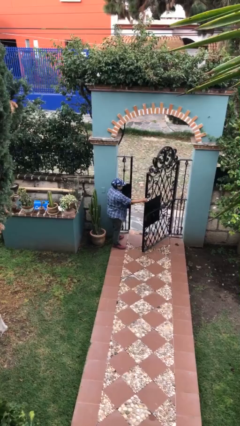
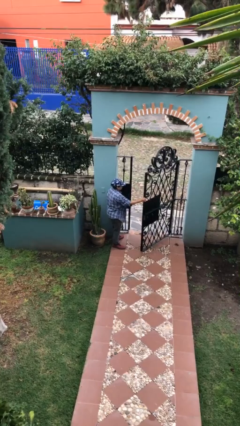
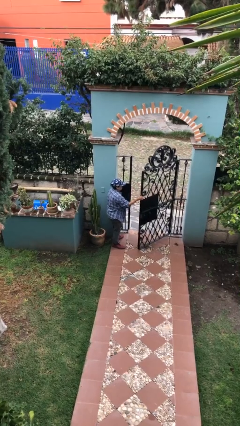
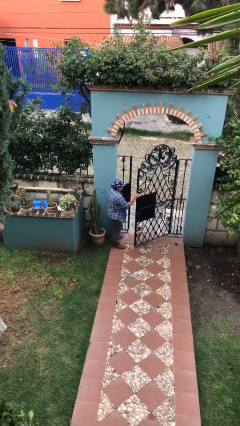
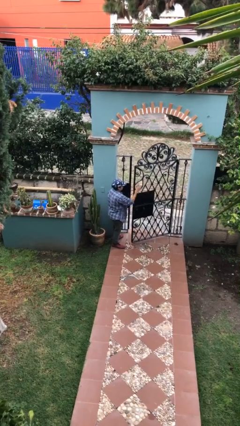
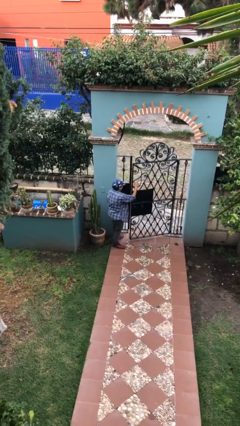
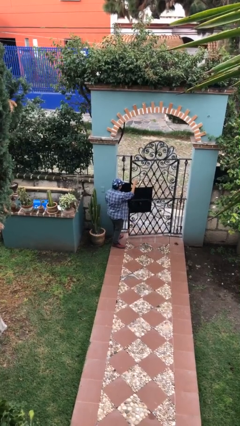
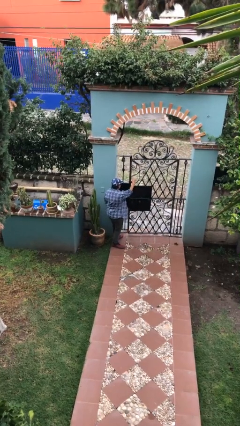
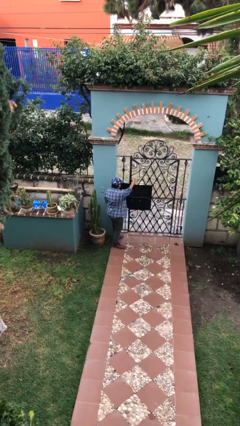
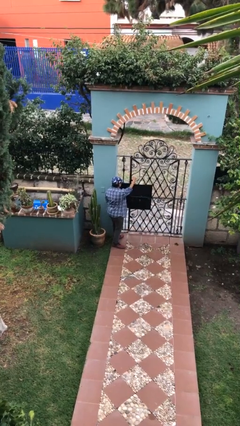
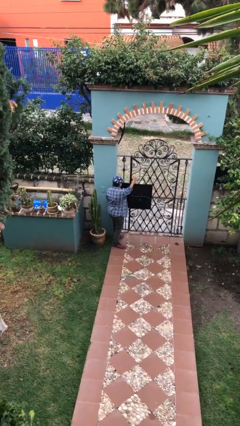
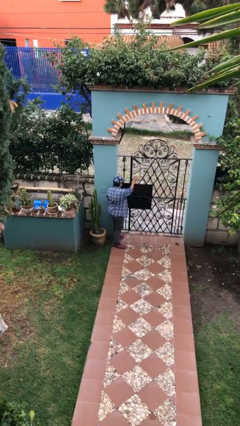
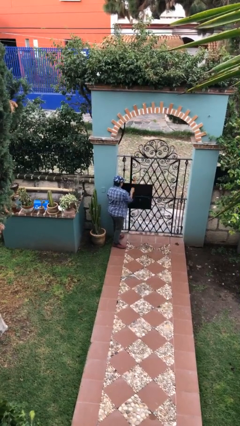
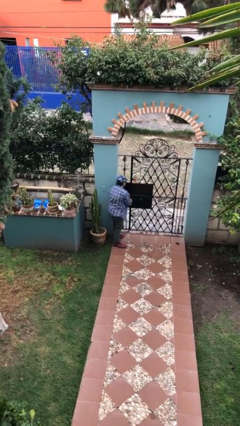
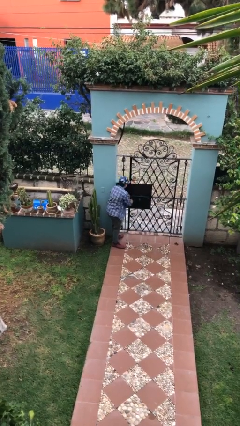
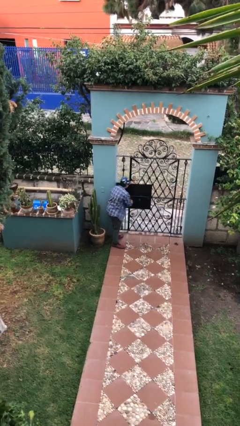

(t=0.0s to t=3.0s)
person closes facility door

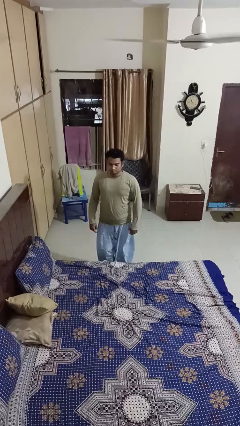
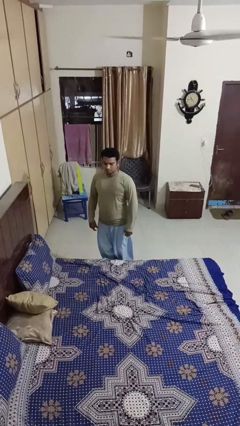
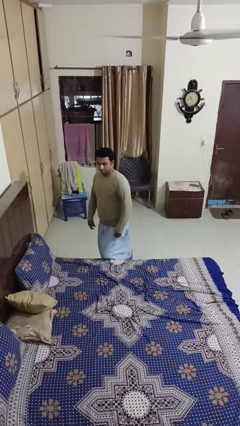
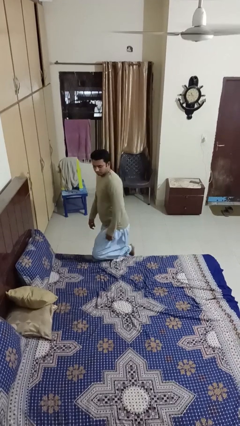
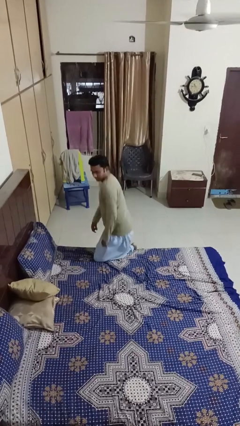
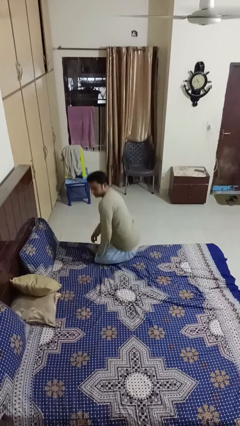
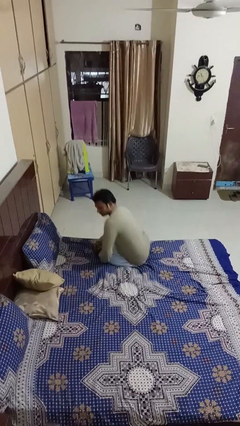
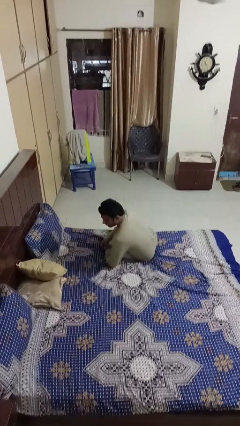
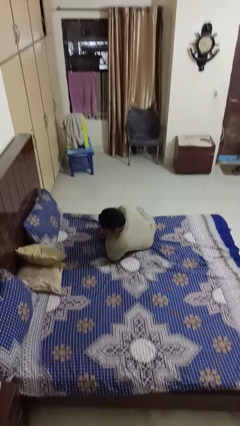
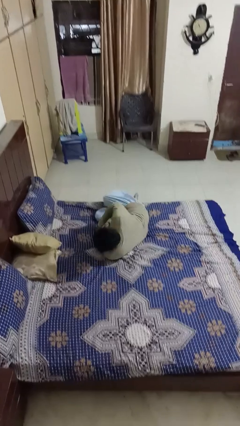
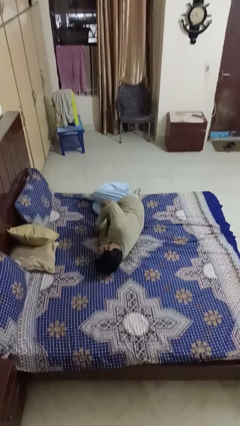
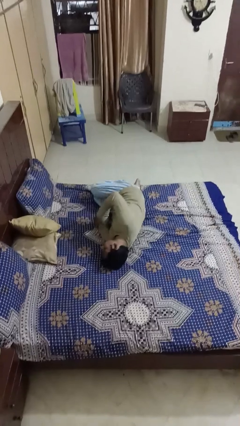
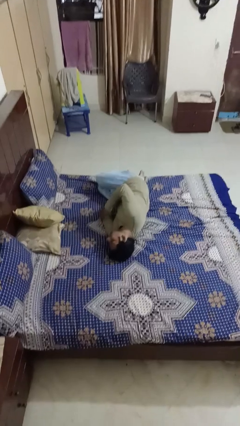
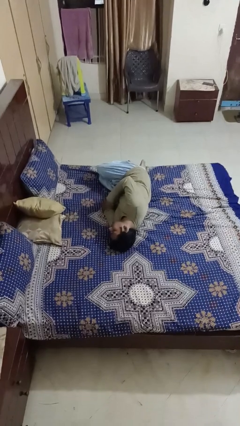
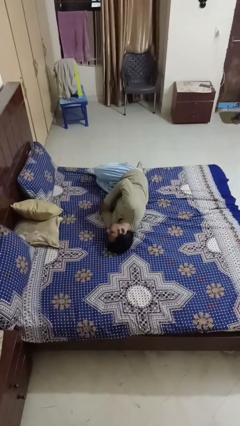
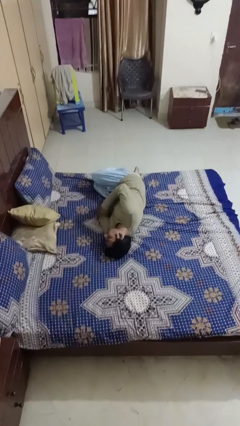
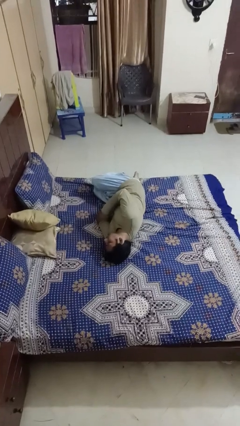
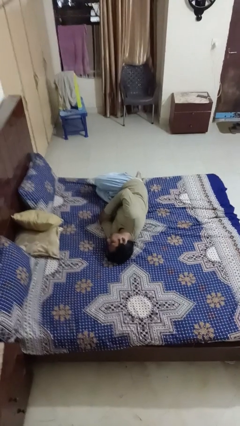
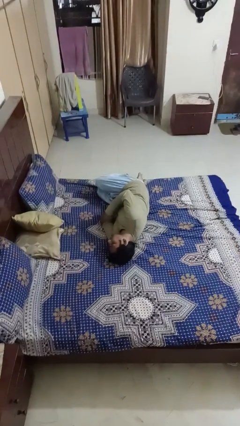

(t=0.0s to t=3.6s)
person lies down on bed

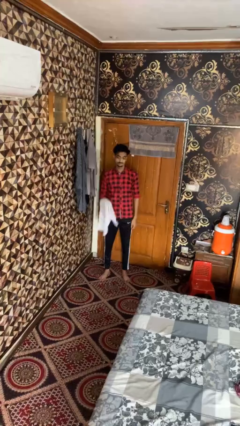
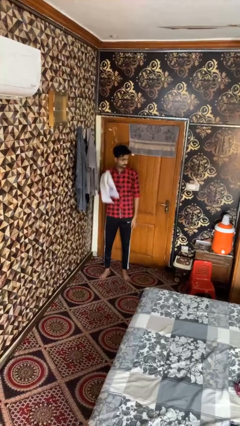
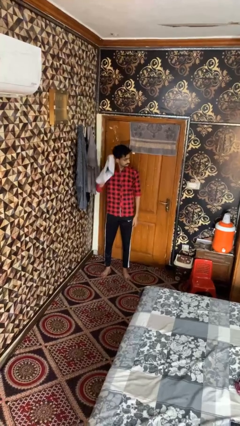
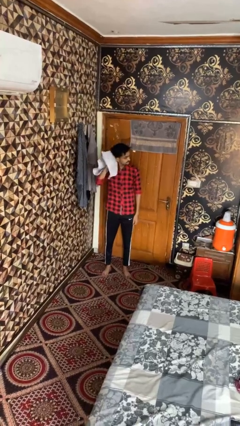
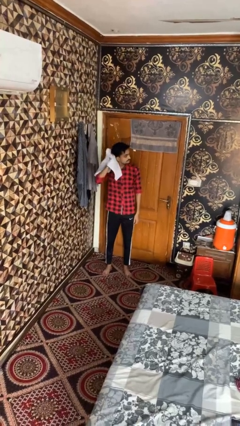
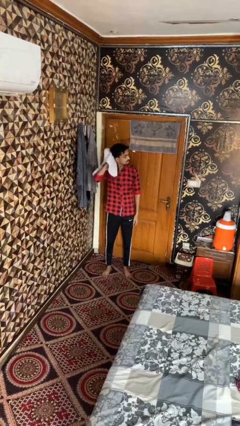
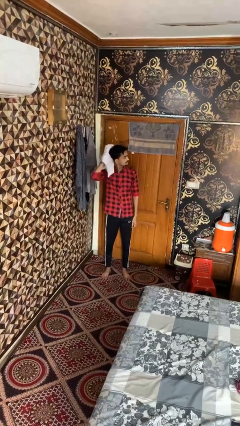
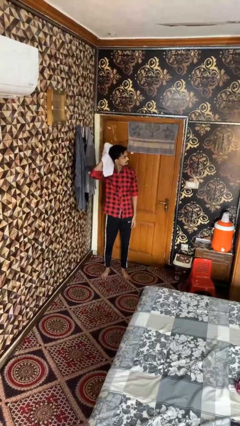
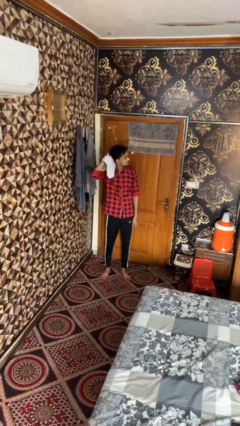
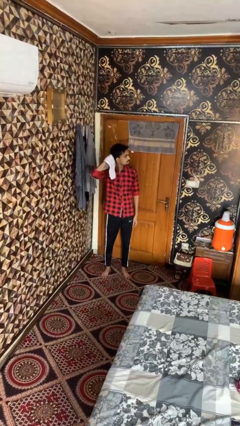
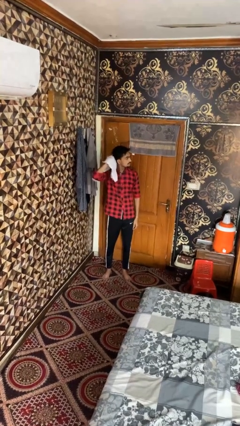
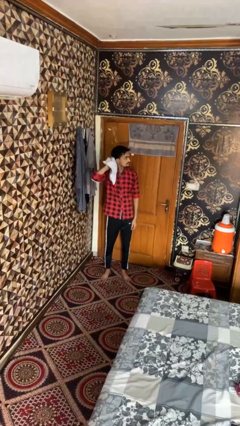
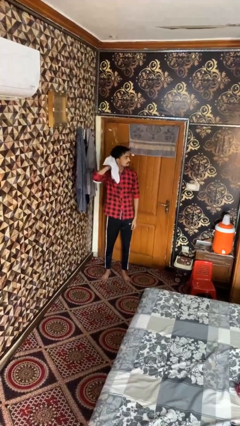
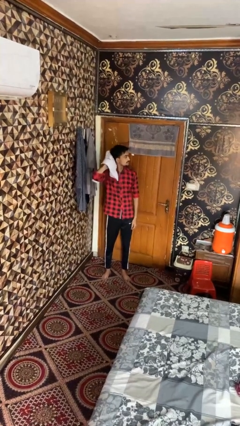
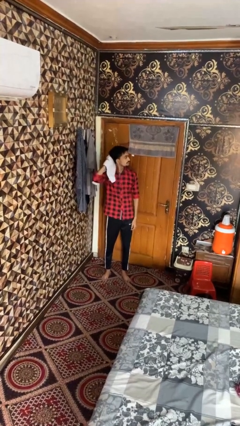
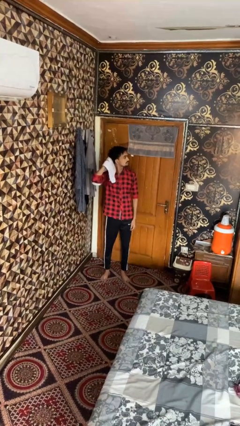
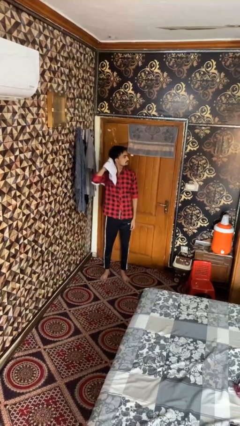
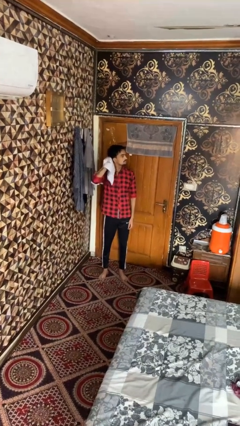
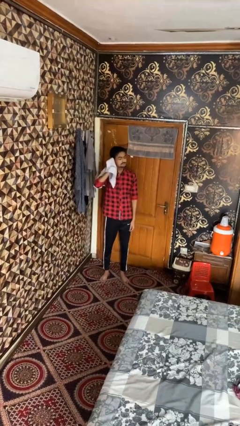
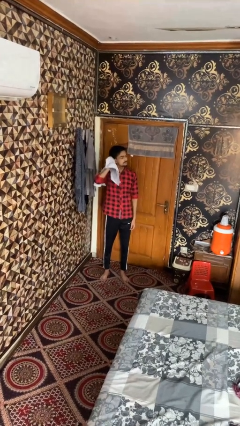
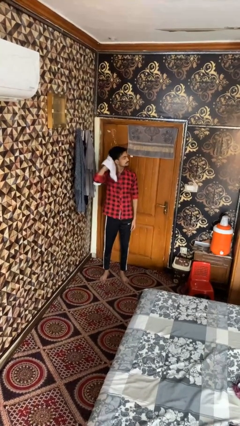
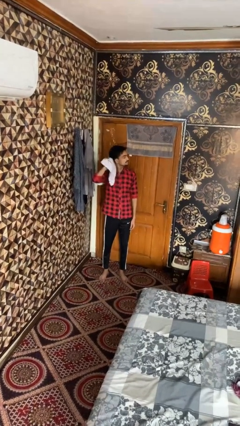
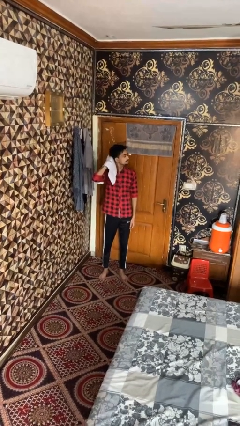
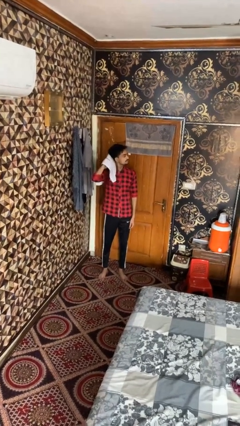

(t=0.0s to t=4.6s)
person dries hair with towel

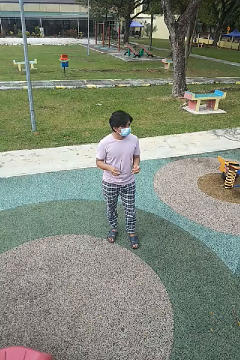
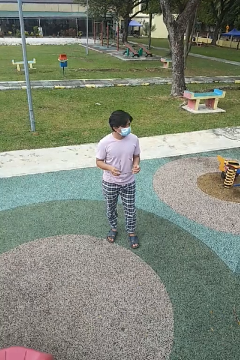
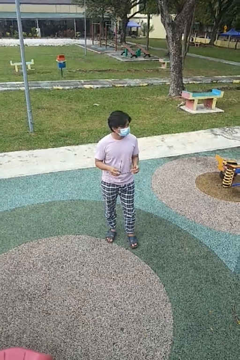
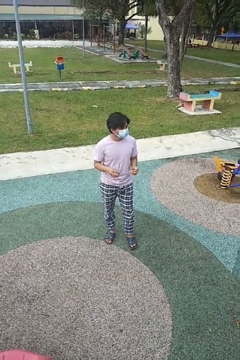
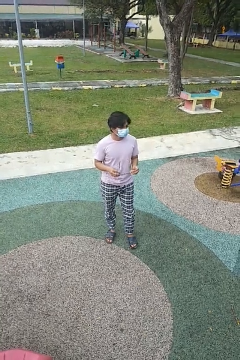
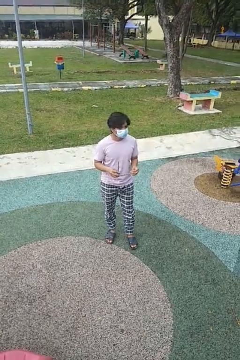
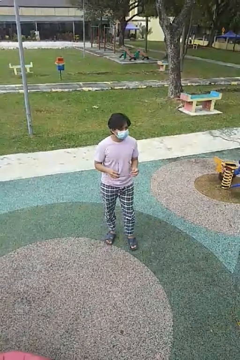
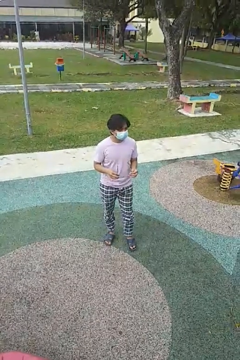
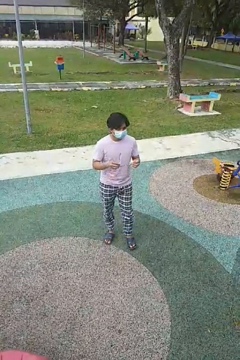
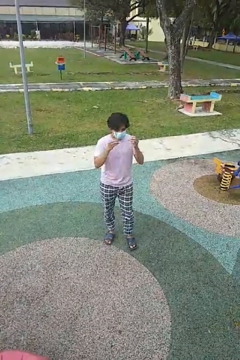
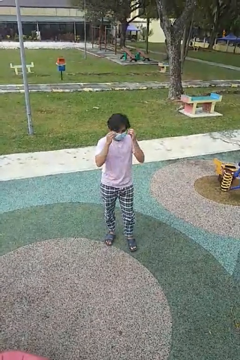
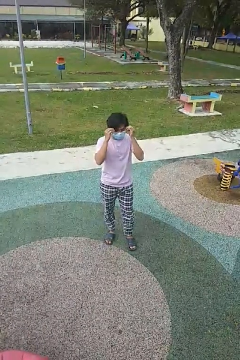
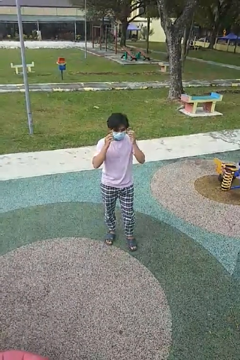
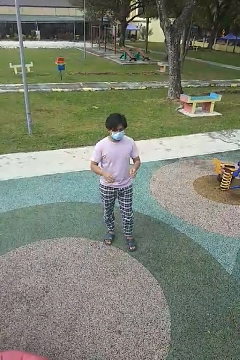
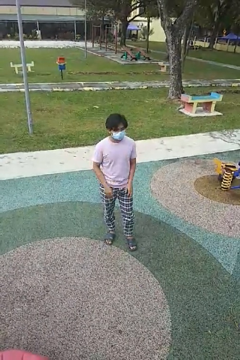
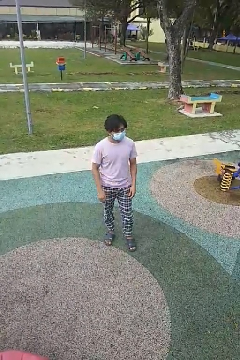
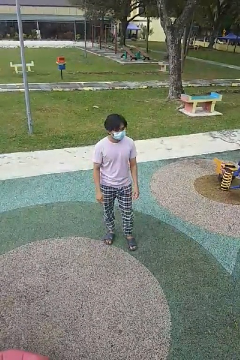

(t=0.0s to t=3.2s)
person puts on glasses

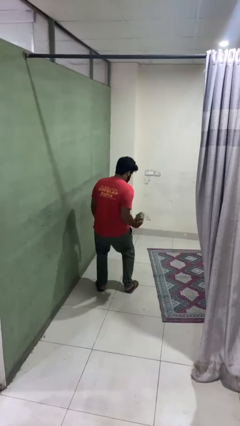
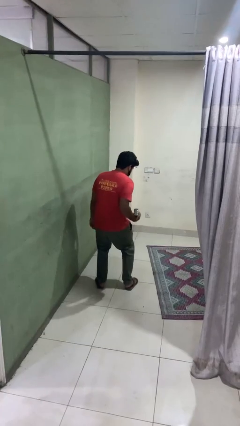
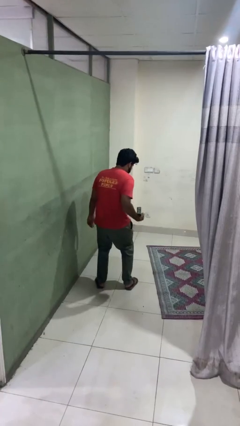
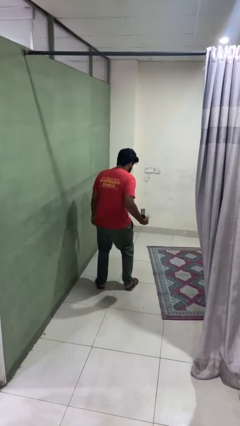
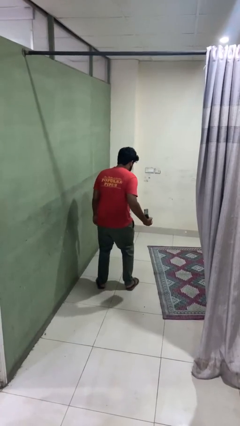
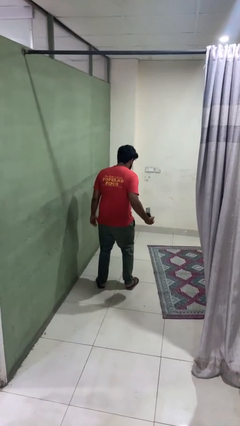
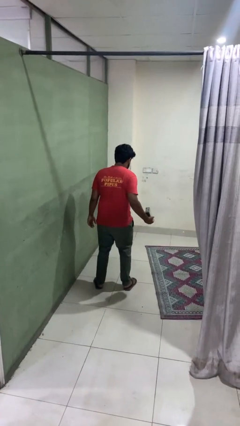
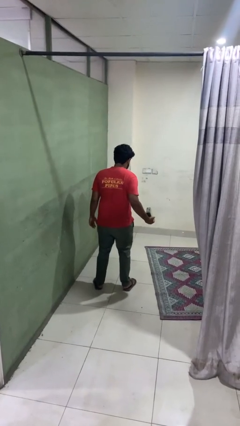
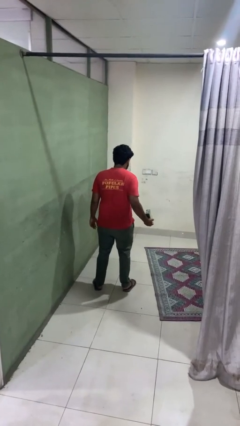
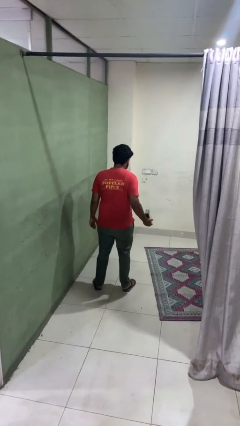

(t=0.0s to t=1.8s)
person catches dropped object

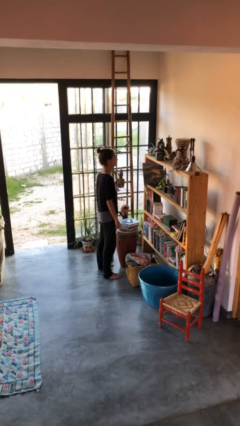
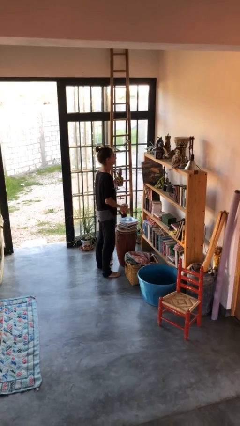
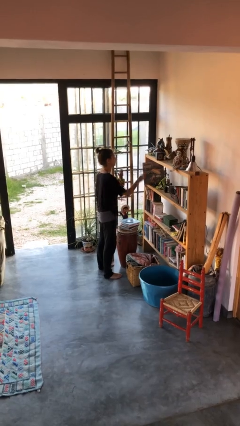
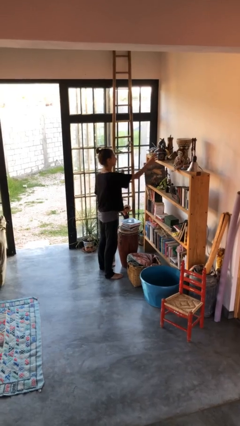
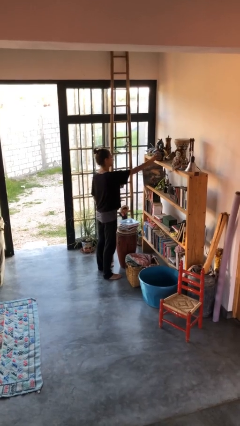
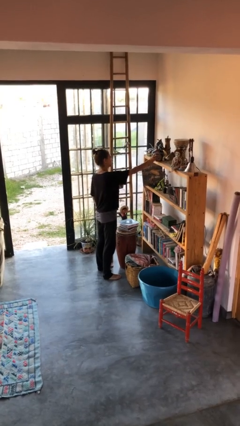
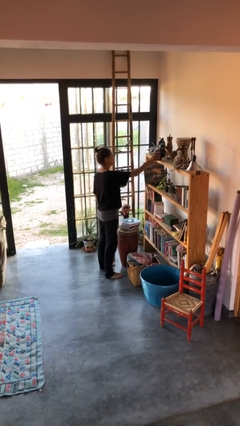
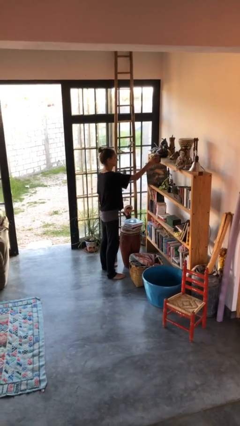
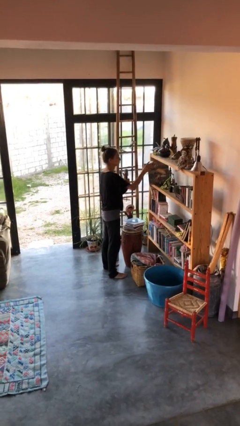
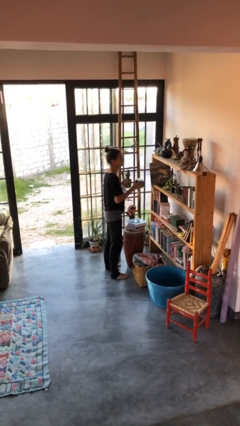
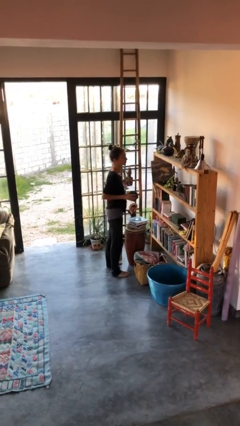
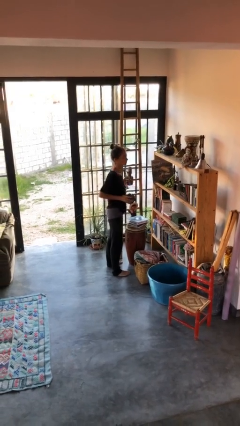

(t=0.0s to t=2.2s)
person picks up object from countertop
